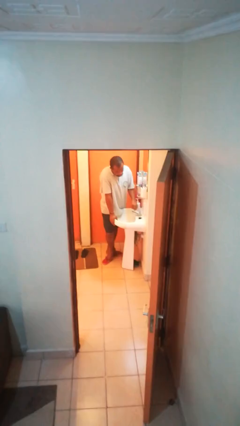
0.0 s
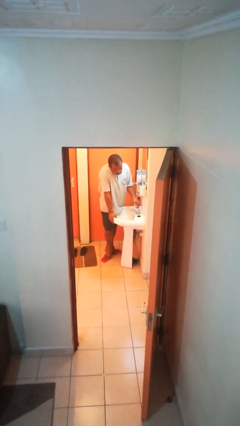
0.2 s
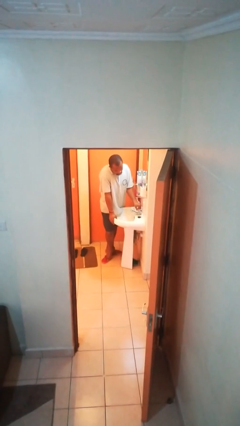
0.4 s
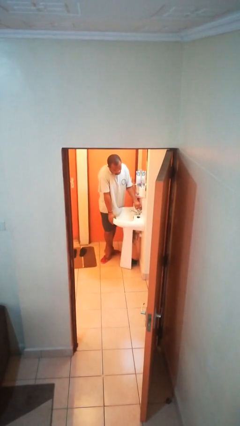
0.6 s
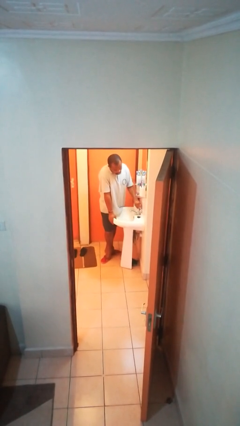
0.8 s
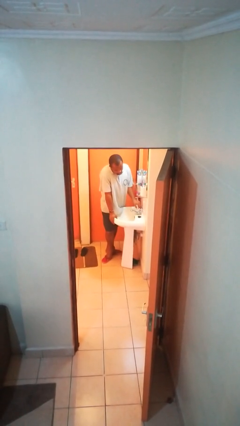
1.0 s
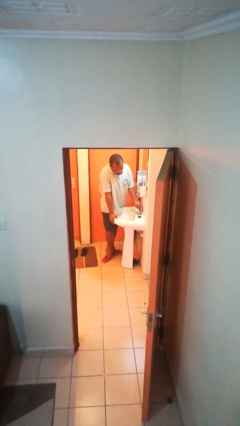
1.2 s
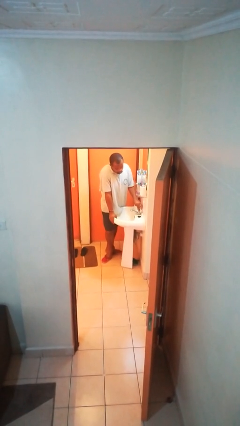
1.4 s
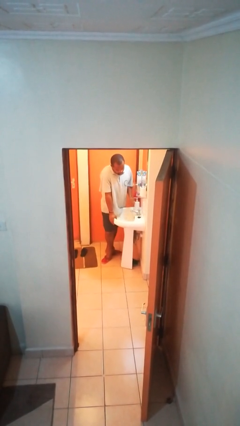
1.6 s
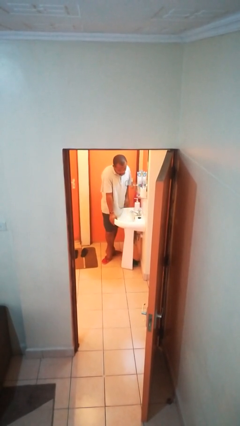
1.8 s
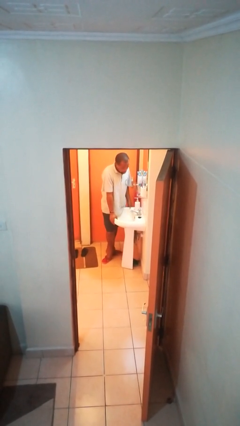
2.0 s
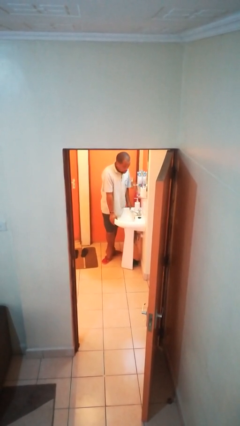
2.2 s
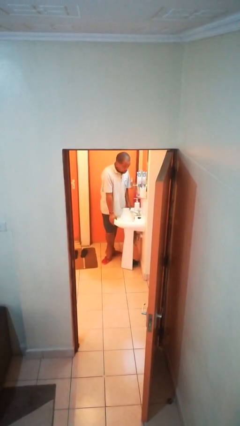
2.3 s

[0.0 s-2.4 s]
person turns off faucet

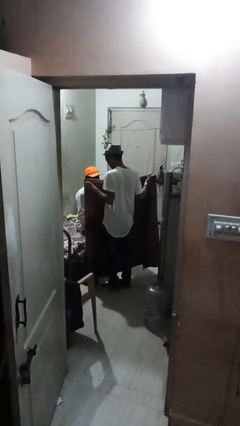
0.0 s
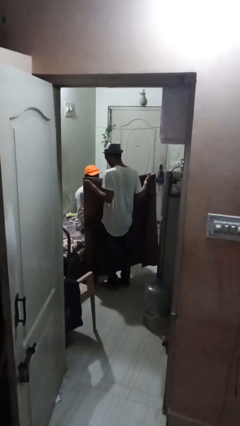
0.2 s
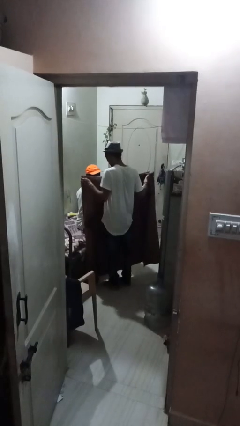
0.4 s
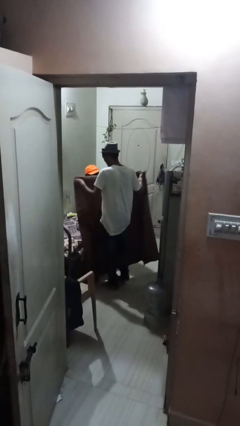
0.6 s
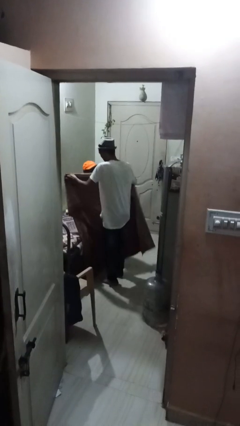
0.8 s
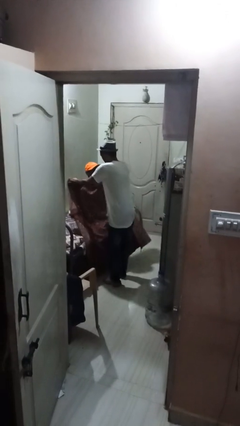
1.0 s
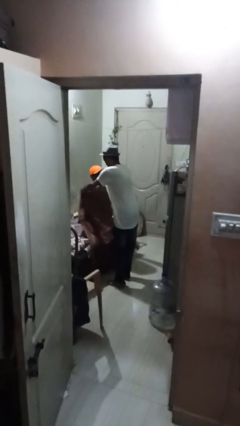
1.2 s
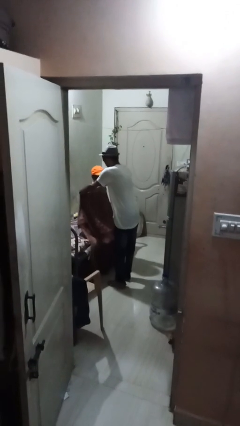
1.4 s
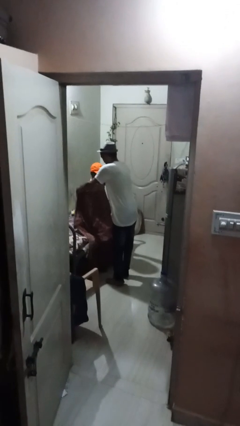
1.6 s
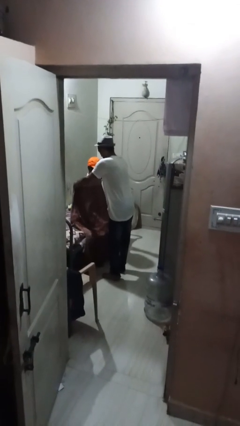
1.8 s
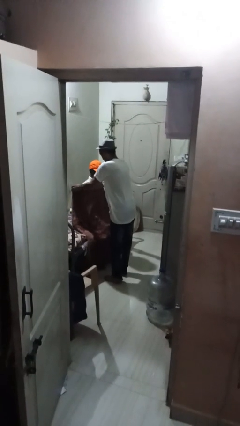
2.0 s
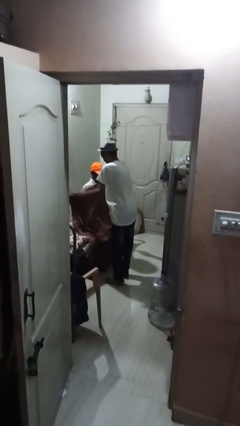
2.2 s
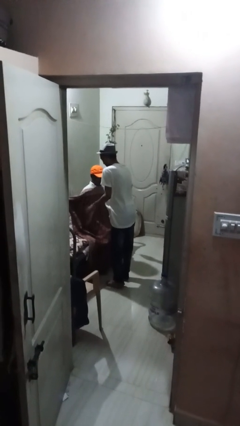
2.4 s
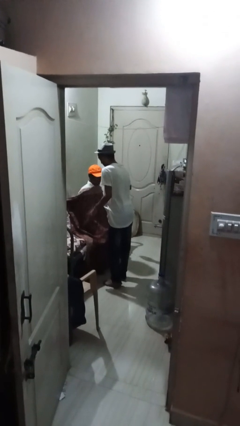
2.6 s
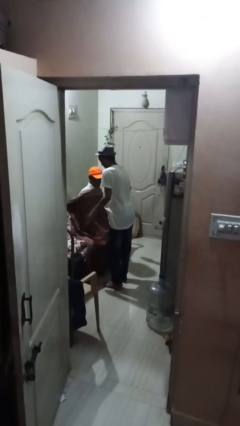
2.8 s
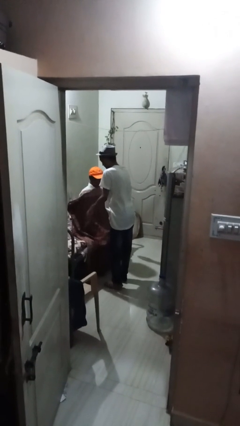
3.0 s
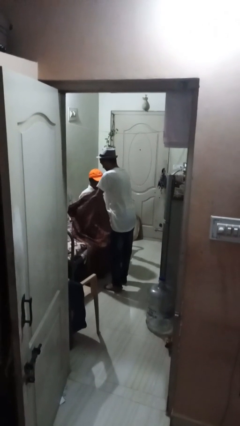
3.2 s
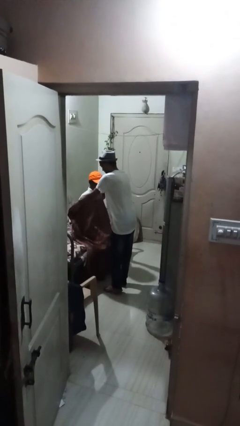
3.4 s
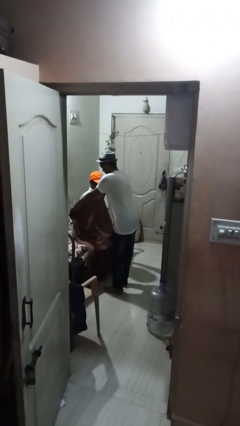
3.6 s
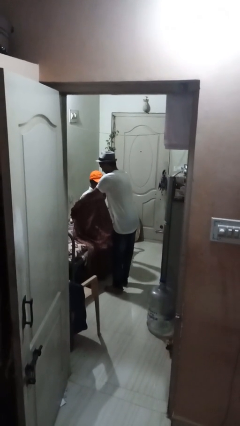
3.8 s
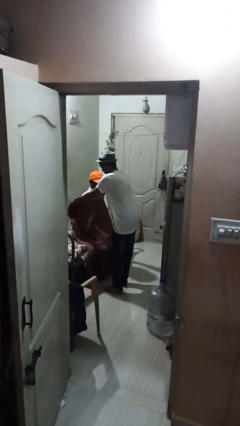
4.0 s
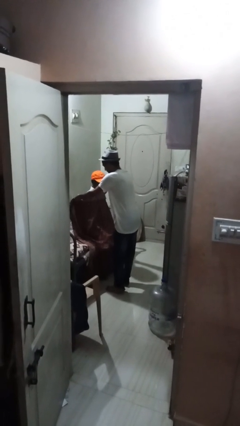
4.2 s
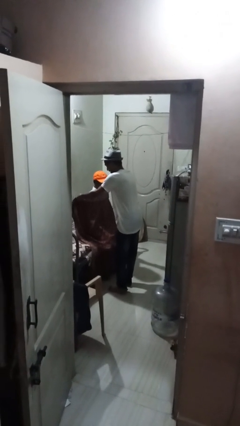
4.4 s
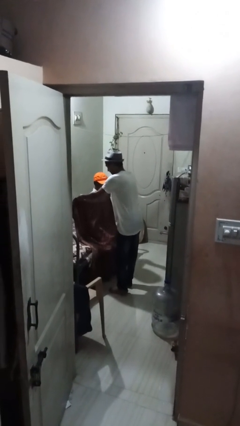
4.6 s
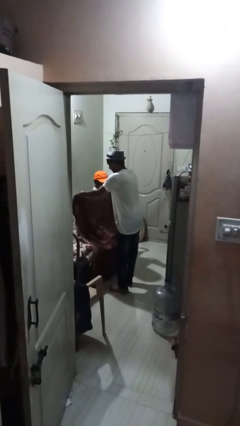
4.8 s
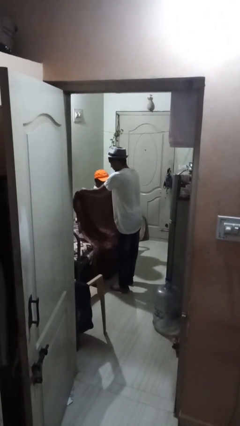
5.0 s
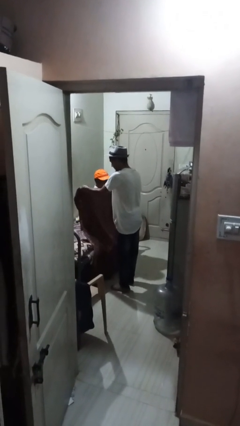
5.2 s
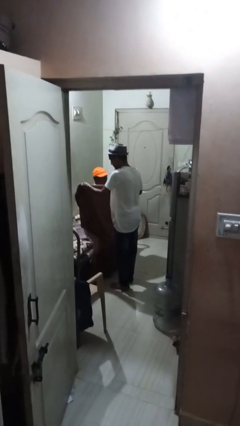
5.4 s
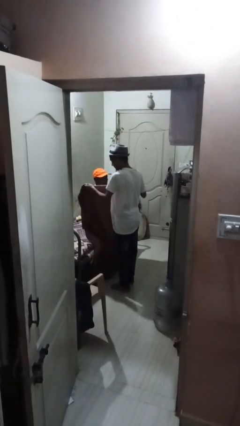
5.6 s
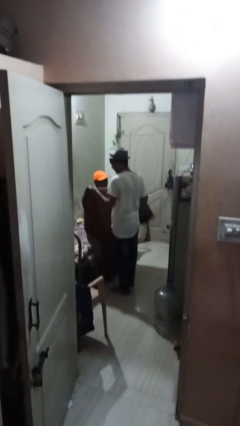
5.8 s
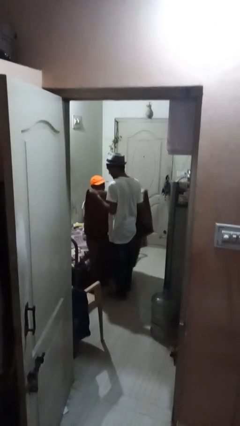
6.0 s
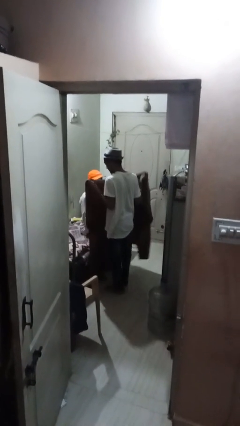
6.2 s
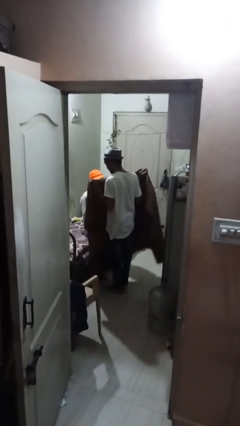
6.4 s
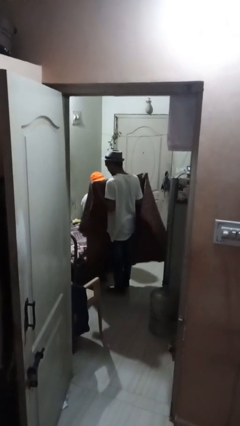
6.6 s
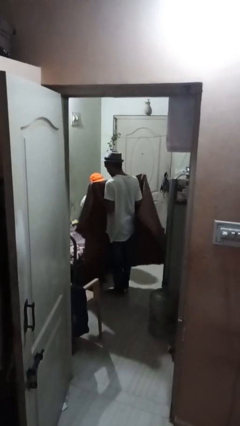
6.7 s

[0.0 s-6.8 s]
person covers friend with blanket

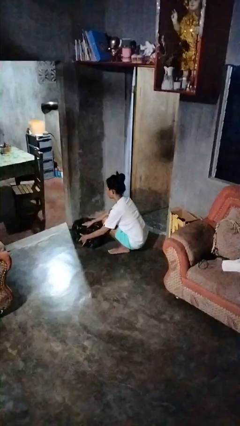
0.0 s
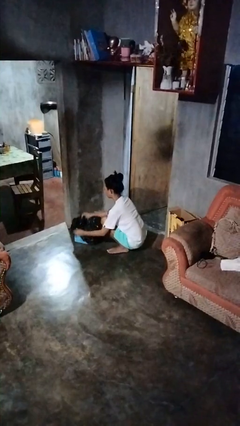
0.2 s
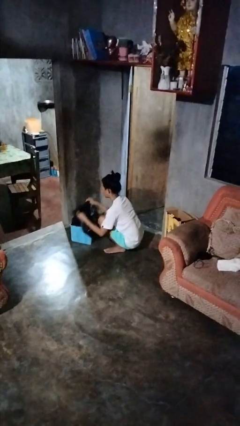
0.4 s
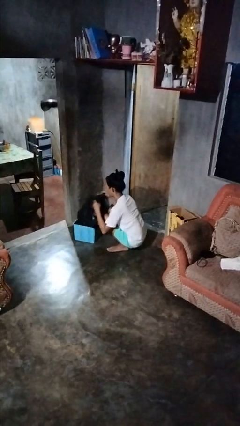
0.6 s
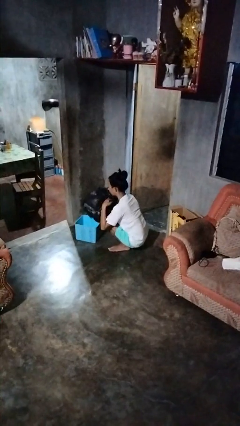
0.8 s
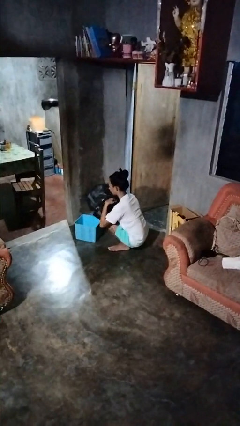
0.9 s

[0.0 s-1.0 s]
person removes trashbag from trashcan

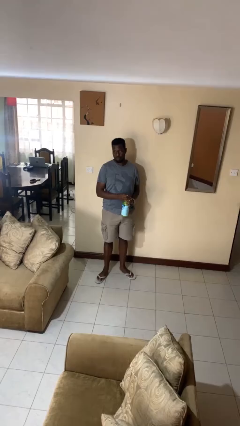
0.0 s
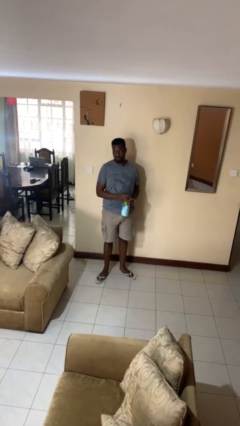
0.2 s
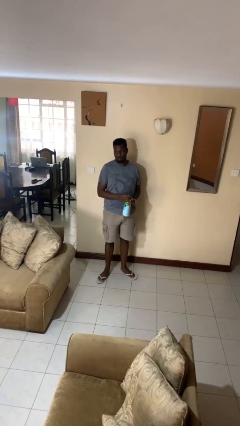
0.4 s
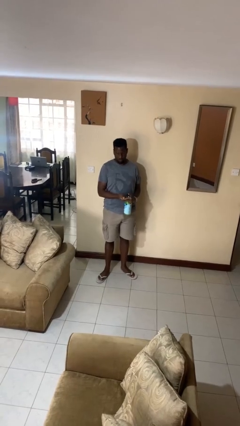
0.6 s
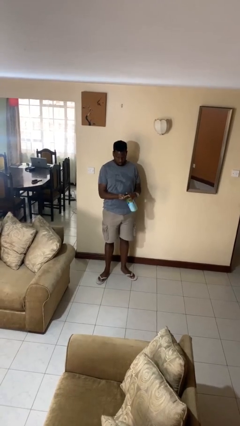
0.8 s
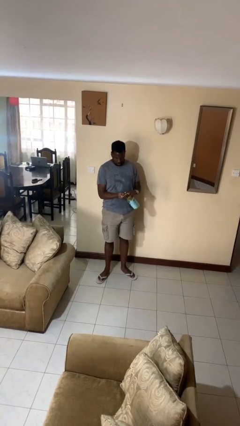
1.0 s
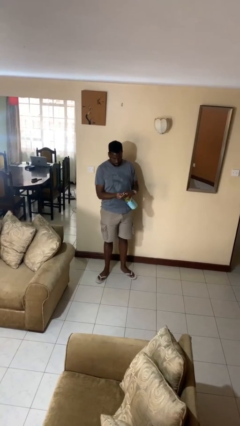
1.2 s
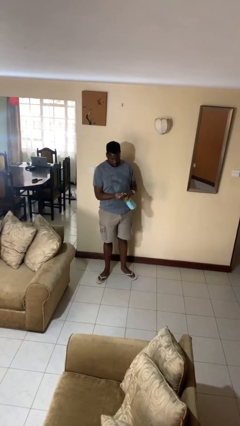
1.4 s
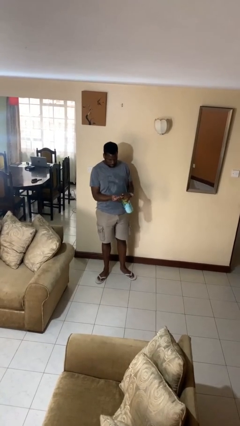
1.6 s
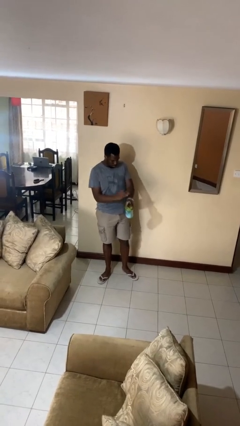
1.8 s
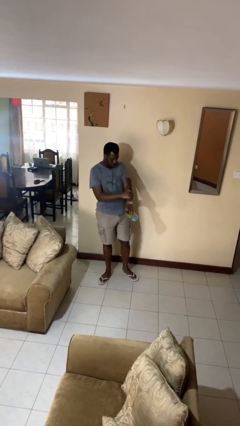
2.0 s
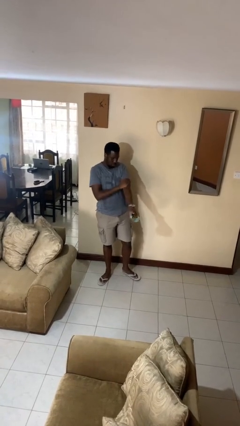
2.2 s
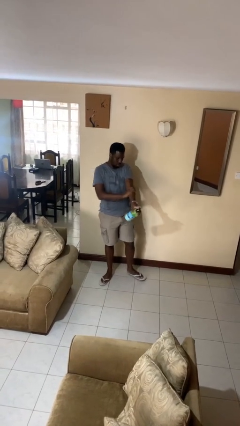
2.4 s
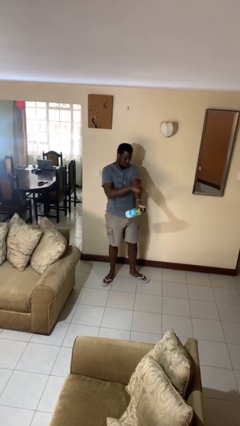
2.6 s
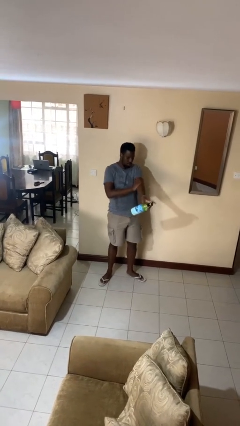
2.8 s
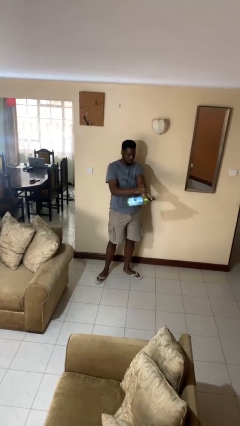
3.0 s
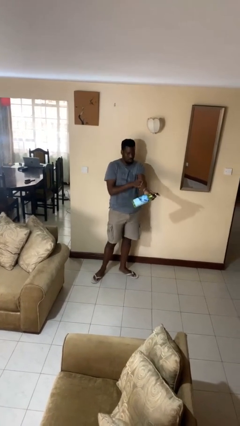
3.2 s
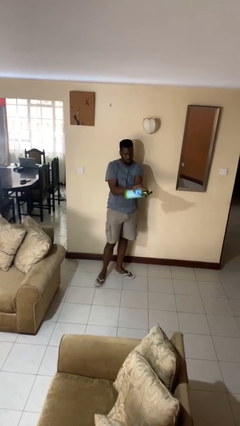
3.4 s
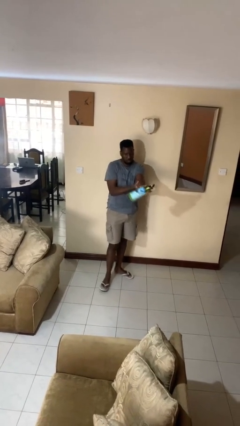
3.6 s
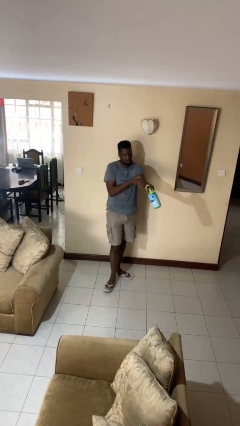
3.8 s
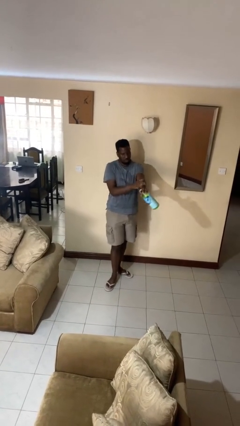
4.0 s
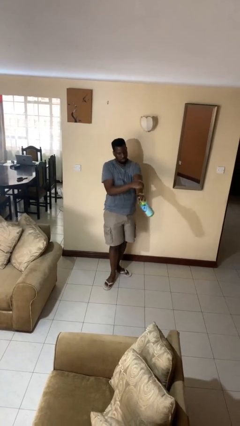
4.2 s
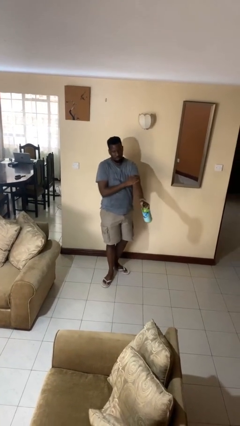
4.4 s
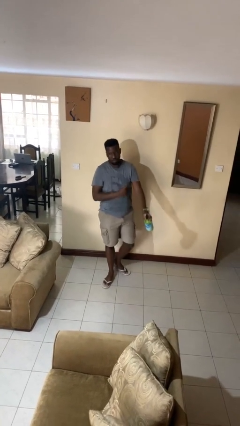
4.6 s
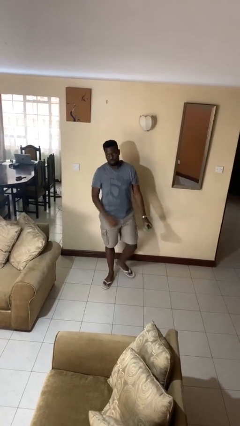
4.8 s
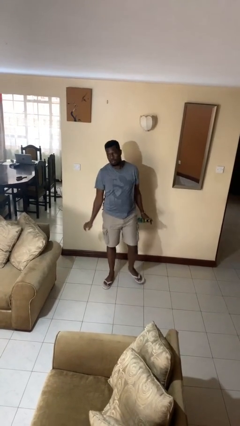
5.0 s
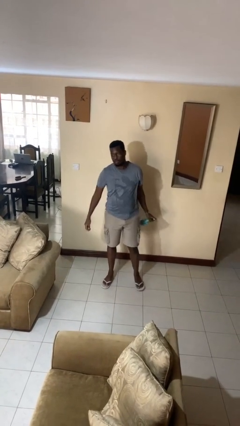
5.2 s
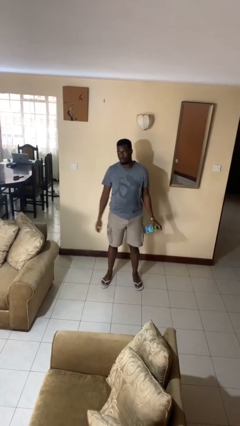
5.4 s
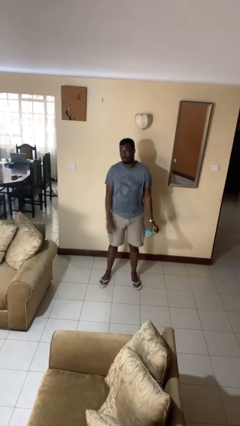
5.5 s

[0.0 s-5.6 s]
person applies sunscreen

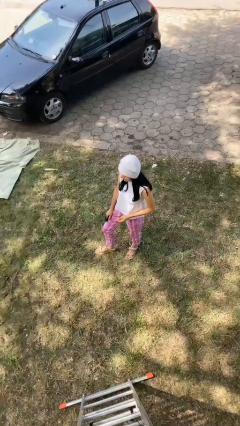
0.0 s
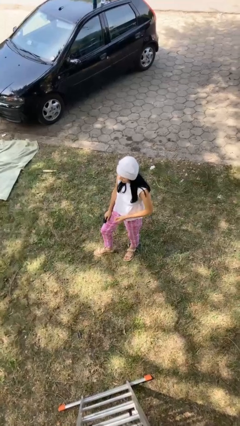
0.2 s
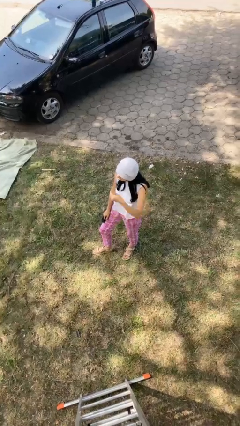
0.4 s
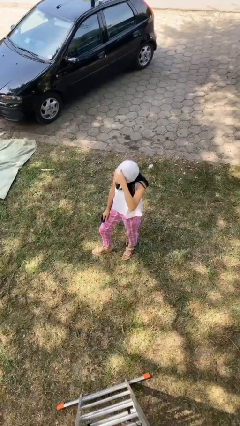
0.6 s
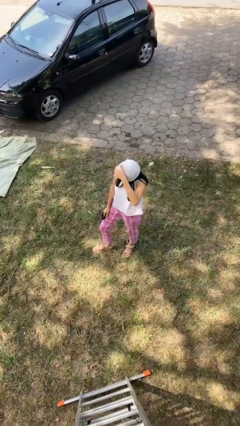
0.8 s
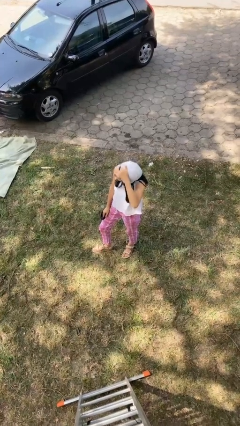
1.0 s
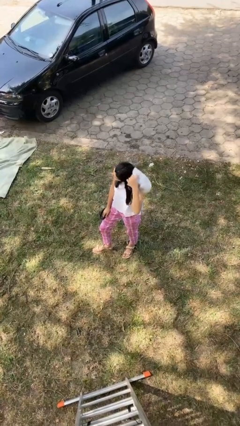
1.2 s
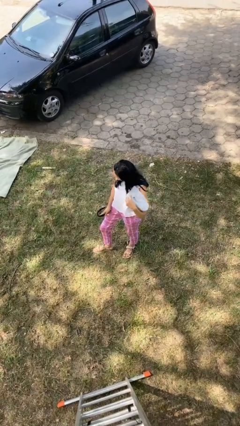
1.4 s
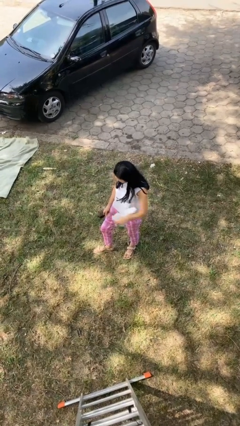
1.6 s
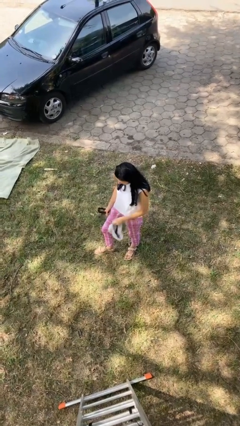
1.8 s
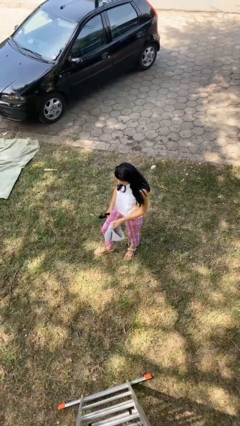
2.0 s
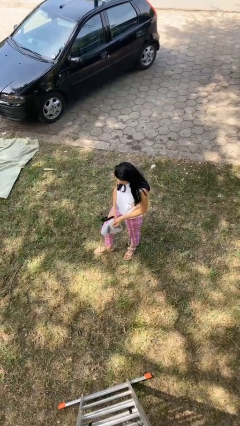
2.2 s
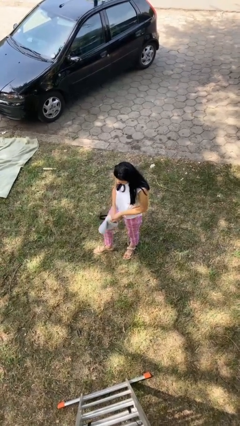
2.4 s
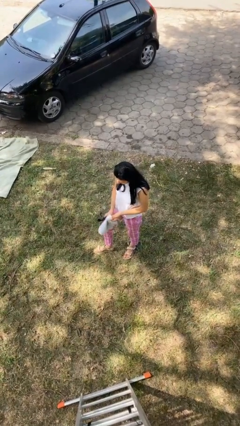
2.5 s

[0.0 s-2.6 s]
person takes off hat
